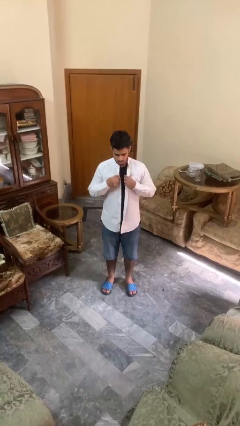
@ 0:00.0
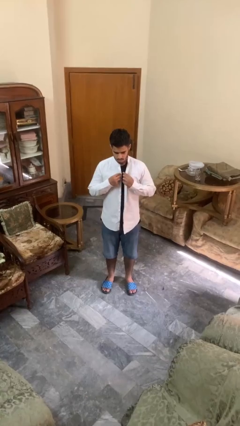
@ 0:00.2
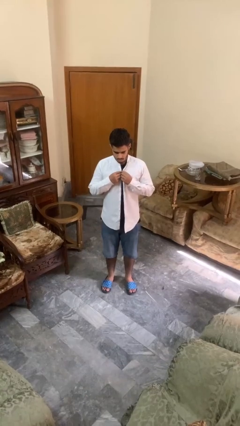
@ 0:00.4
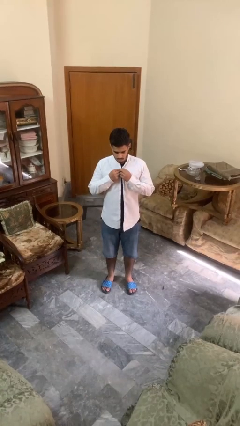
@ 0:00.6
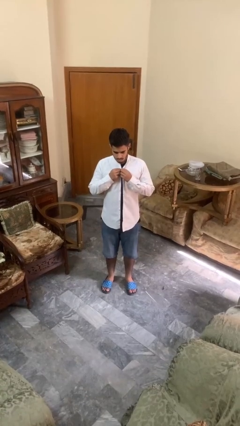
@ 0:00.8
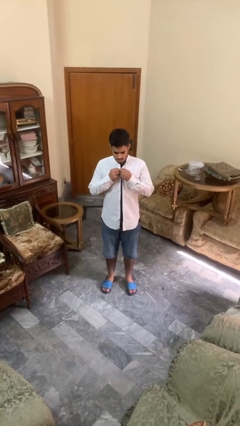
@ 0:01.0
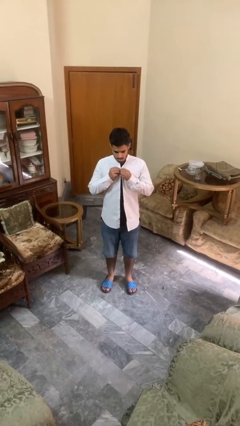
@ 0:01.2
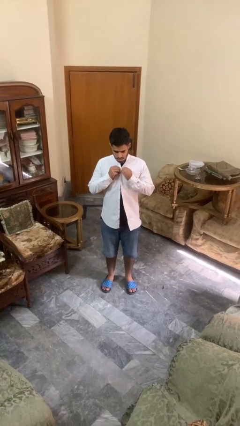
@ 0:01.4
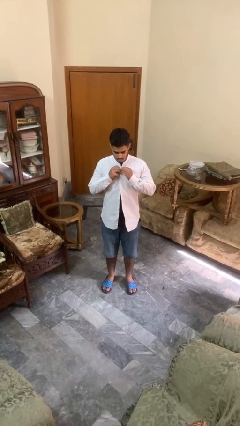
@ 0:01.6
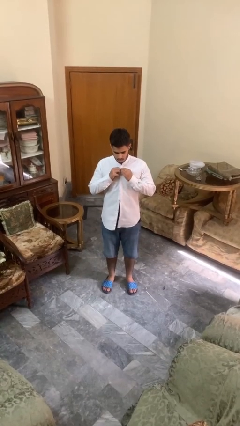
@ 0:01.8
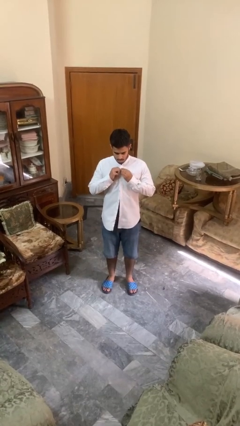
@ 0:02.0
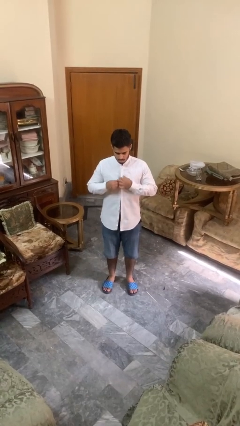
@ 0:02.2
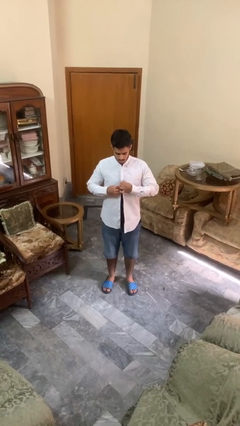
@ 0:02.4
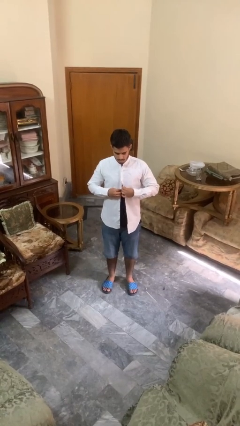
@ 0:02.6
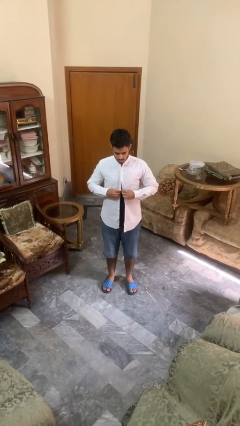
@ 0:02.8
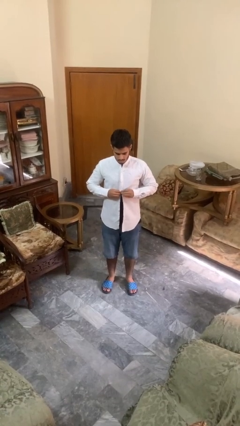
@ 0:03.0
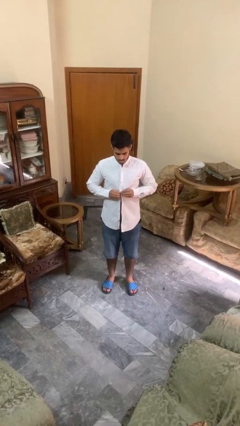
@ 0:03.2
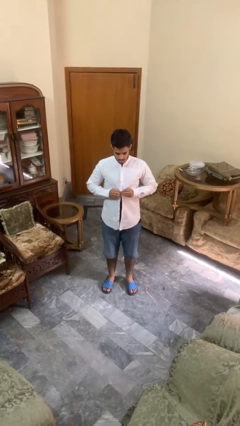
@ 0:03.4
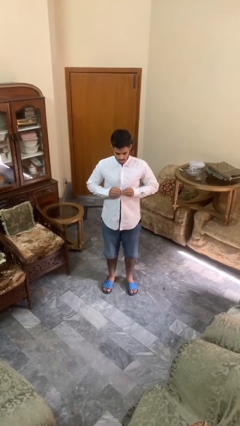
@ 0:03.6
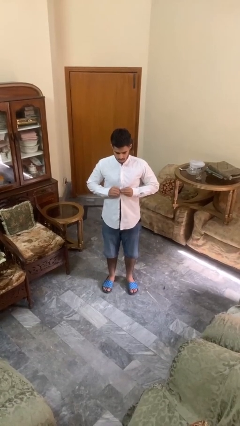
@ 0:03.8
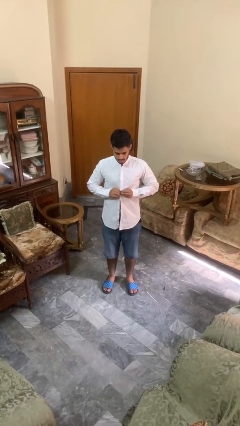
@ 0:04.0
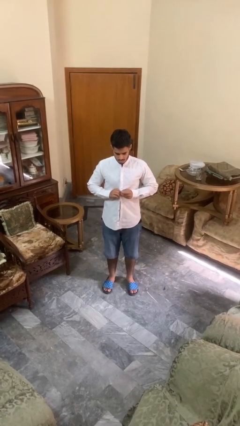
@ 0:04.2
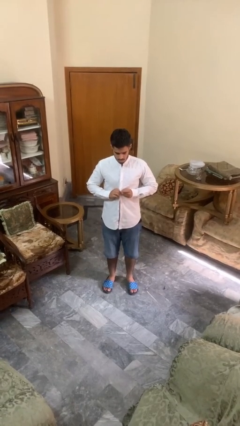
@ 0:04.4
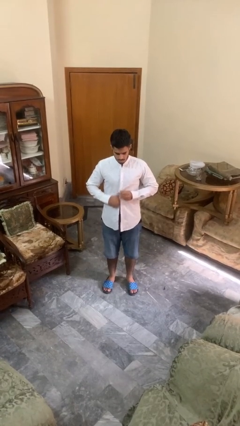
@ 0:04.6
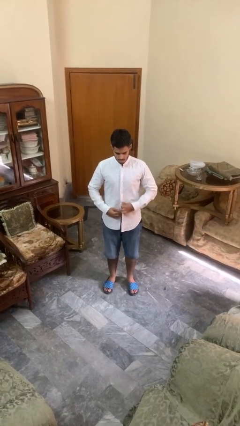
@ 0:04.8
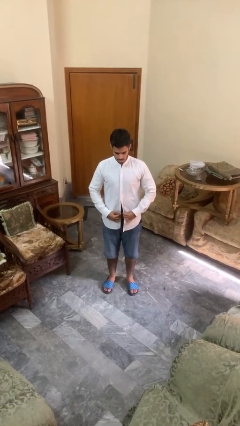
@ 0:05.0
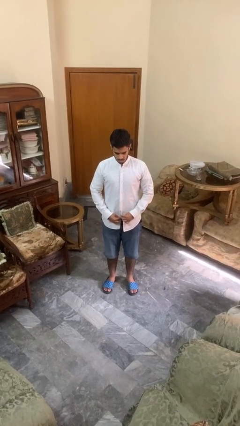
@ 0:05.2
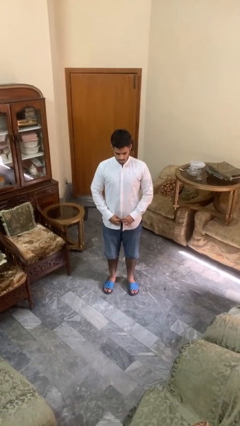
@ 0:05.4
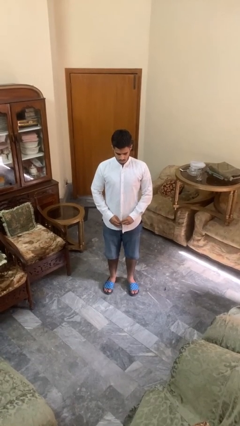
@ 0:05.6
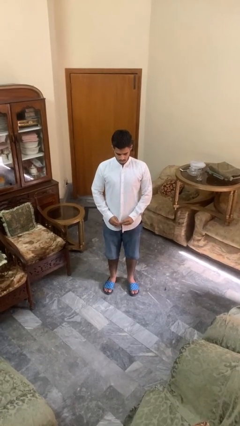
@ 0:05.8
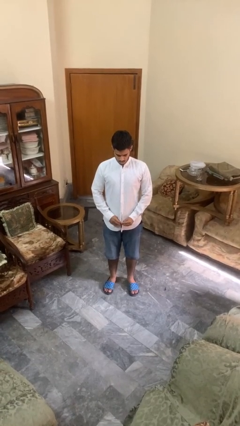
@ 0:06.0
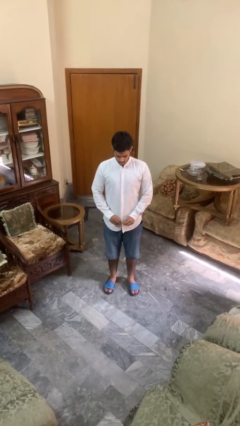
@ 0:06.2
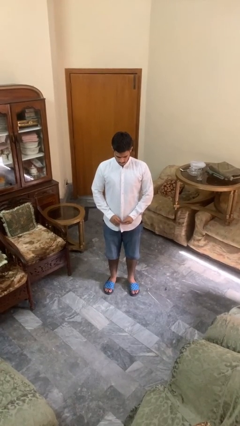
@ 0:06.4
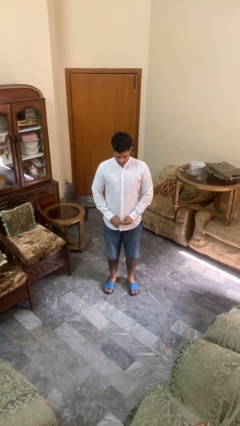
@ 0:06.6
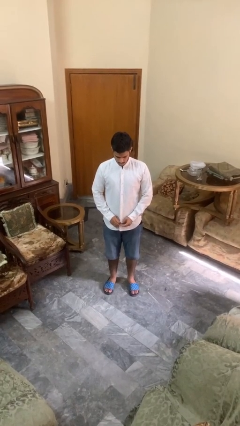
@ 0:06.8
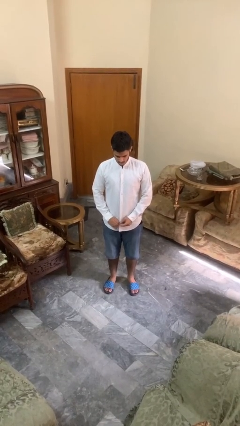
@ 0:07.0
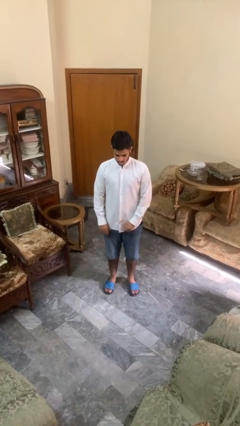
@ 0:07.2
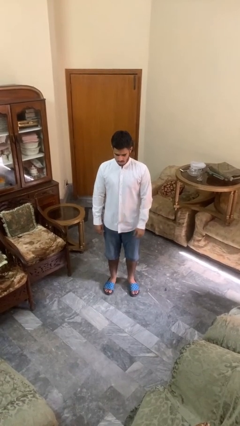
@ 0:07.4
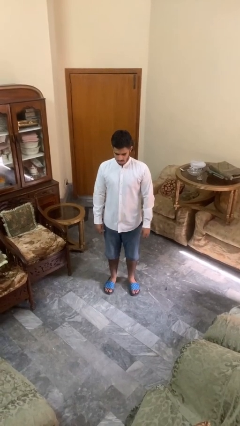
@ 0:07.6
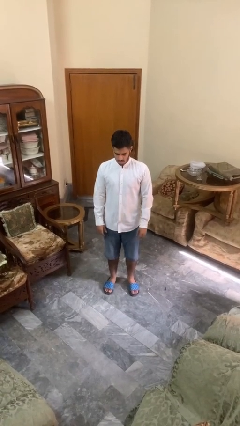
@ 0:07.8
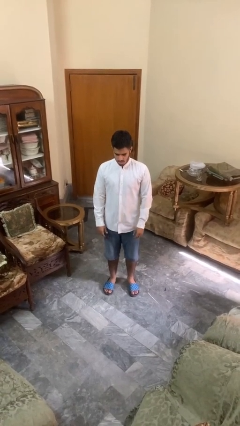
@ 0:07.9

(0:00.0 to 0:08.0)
person buttons shirt

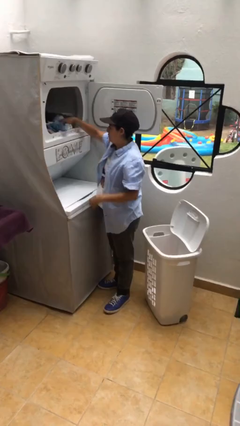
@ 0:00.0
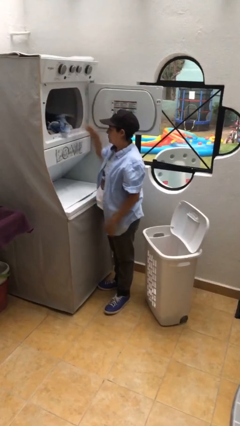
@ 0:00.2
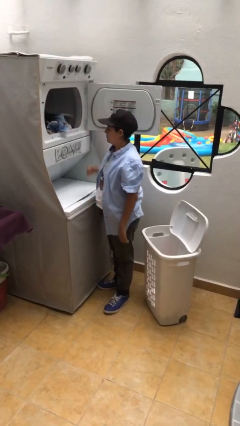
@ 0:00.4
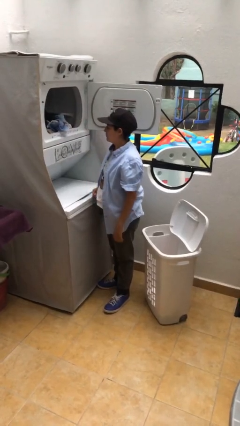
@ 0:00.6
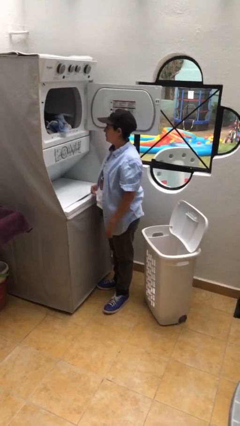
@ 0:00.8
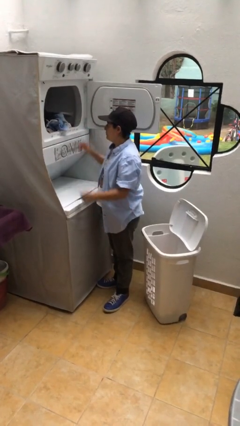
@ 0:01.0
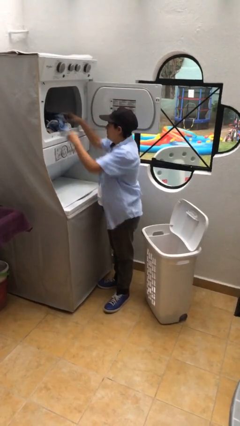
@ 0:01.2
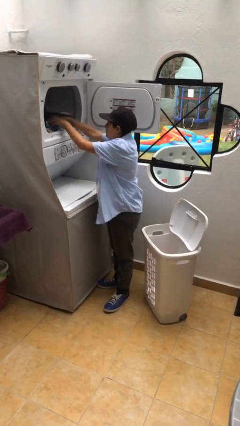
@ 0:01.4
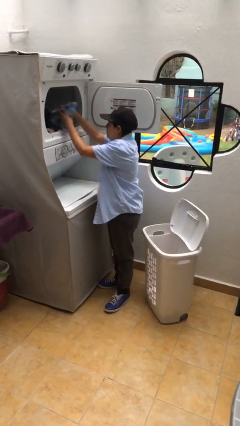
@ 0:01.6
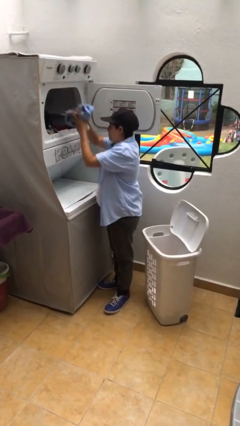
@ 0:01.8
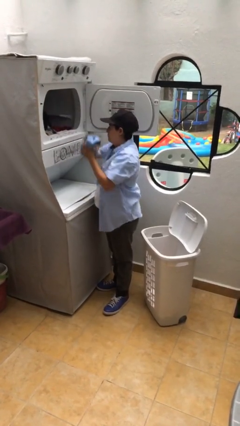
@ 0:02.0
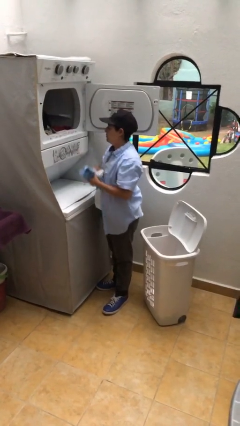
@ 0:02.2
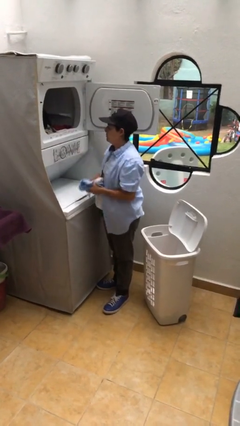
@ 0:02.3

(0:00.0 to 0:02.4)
person unloads dryer

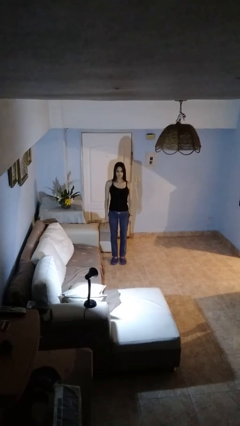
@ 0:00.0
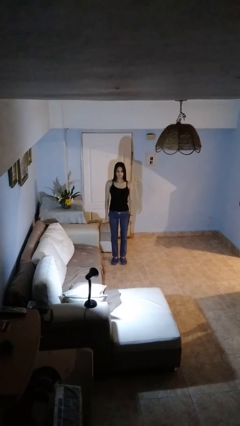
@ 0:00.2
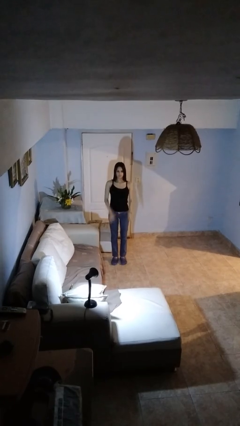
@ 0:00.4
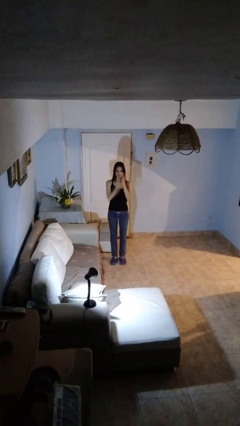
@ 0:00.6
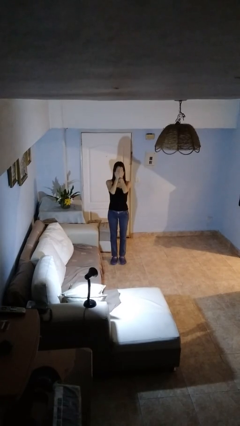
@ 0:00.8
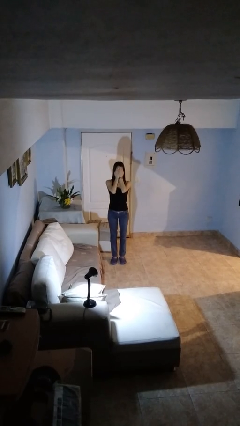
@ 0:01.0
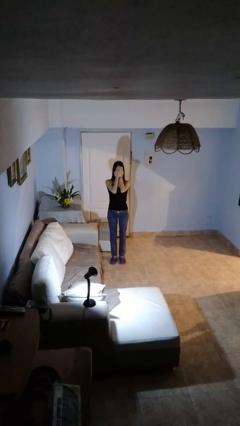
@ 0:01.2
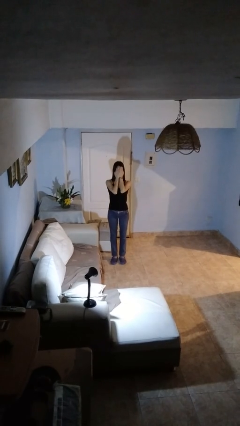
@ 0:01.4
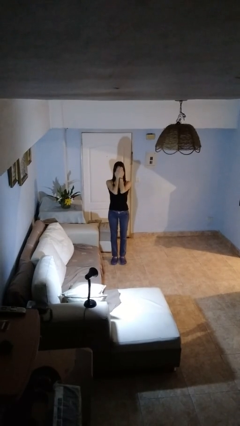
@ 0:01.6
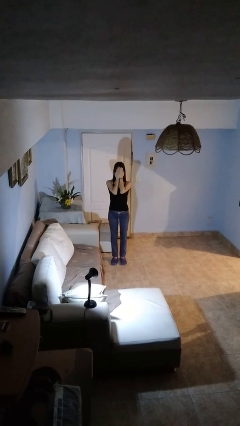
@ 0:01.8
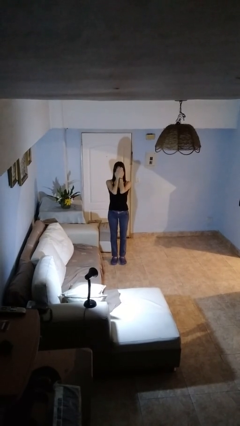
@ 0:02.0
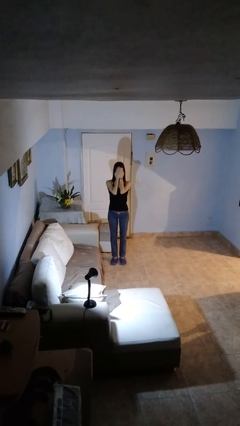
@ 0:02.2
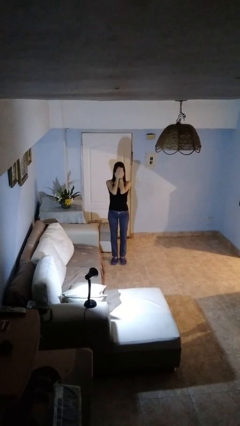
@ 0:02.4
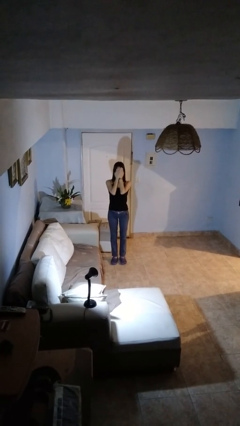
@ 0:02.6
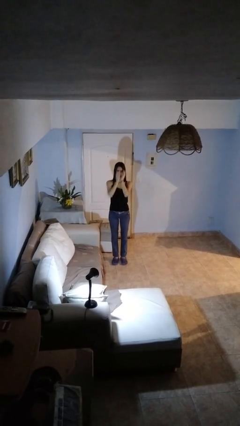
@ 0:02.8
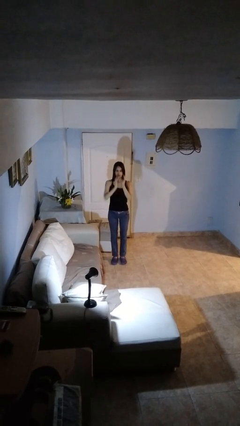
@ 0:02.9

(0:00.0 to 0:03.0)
person covers face with hands

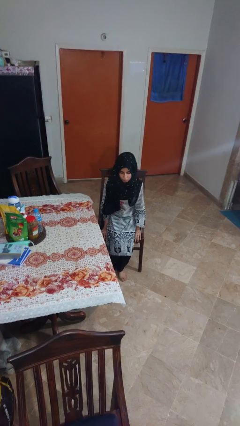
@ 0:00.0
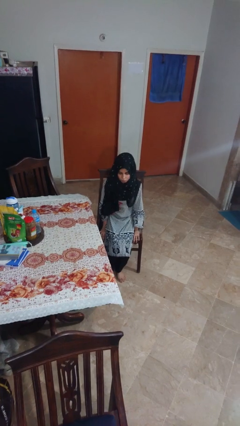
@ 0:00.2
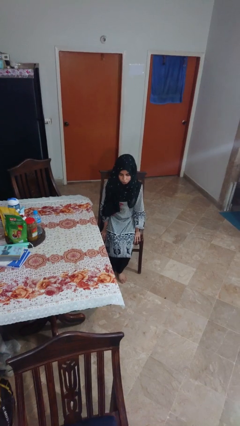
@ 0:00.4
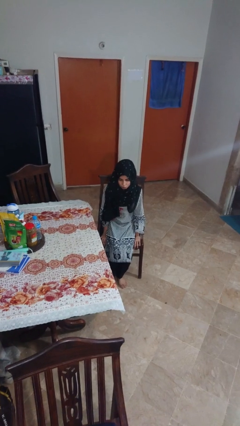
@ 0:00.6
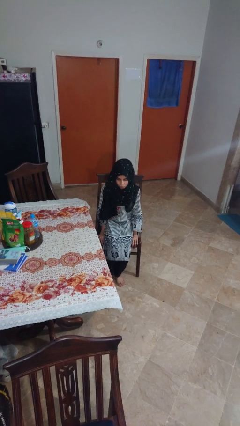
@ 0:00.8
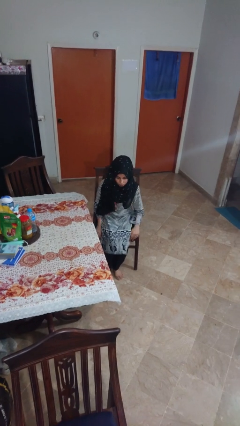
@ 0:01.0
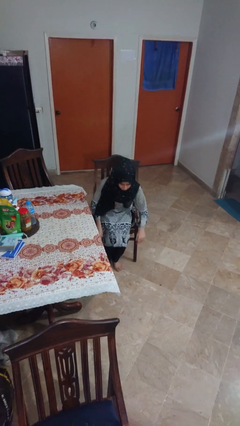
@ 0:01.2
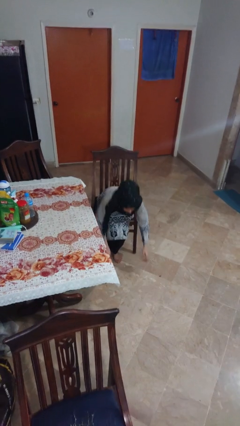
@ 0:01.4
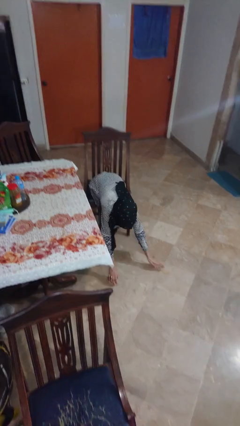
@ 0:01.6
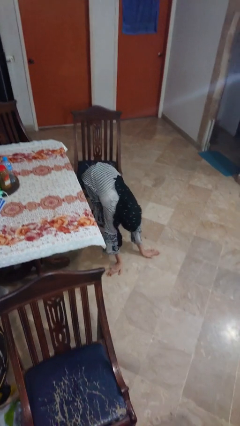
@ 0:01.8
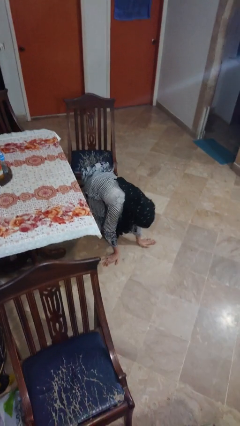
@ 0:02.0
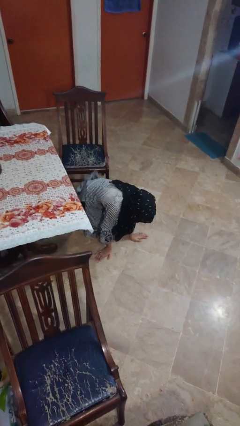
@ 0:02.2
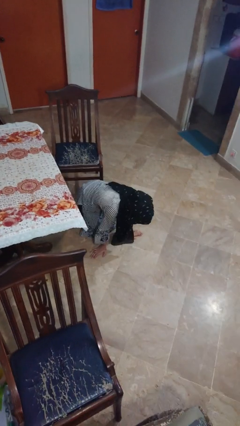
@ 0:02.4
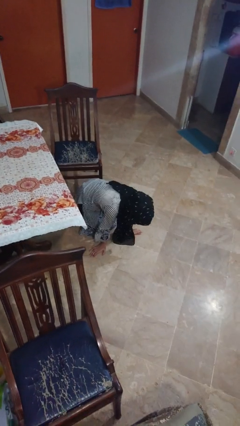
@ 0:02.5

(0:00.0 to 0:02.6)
person falls from chair

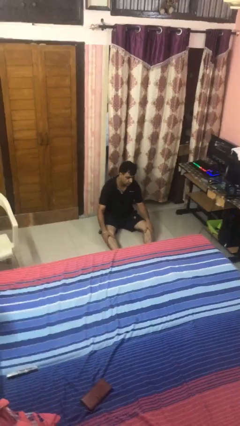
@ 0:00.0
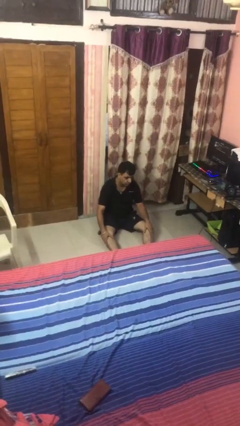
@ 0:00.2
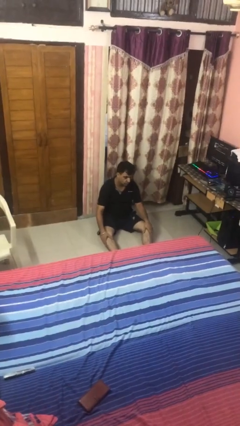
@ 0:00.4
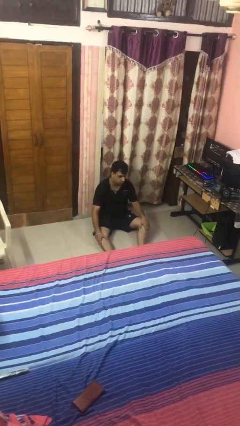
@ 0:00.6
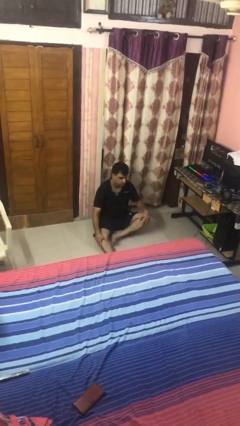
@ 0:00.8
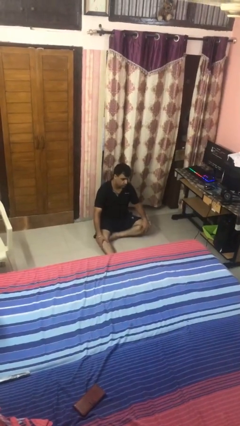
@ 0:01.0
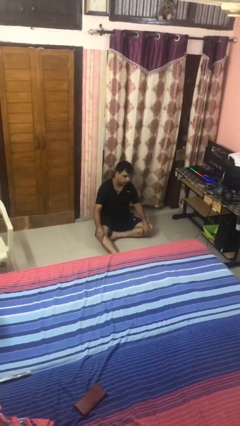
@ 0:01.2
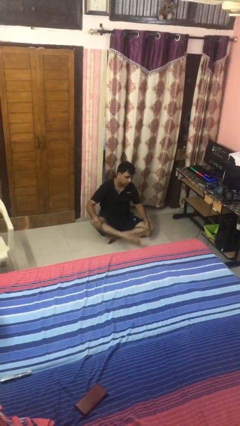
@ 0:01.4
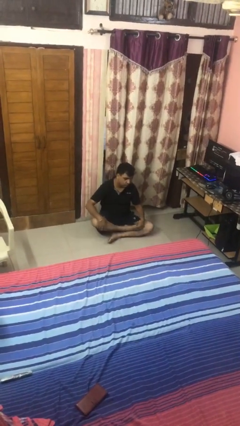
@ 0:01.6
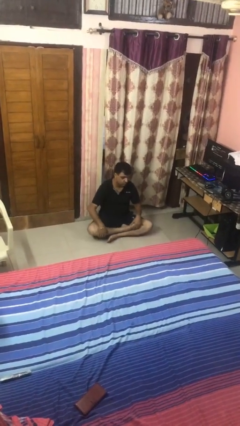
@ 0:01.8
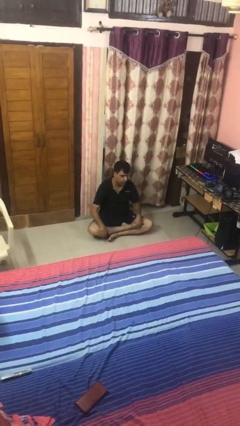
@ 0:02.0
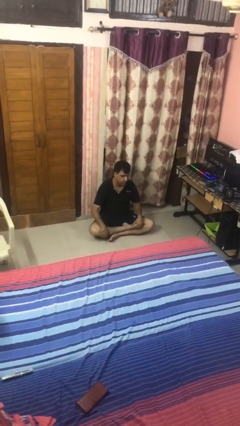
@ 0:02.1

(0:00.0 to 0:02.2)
person crosses legs
